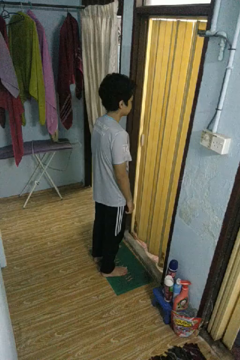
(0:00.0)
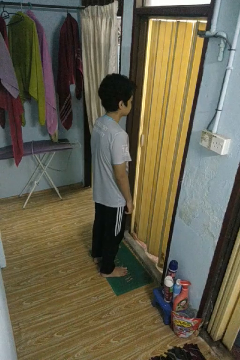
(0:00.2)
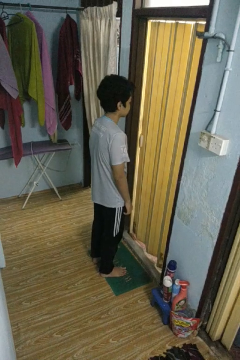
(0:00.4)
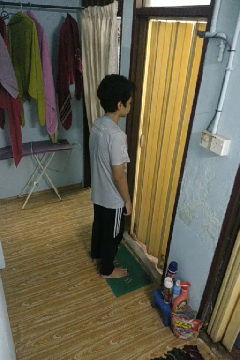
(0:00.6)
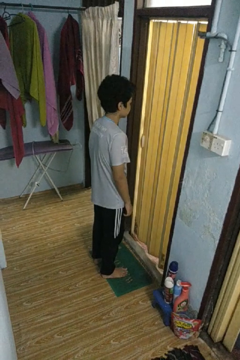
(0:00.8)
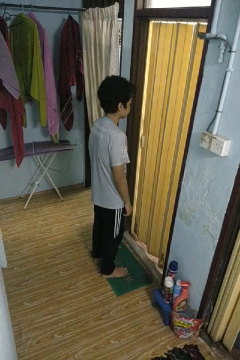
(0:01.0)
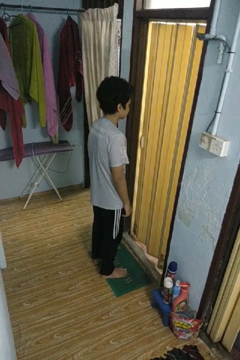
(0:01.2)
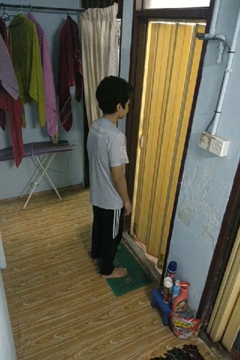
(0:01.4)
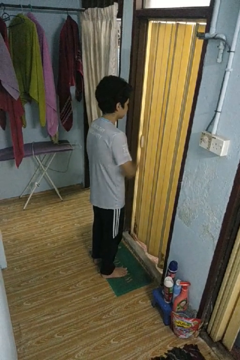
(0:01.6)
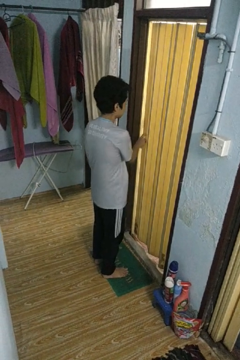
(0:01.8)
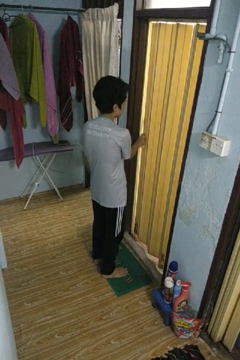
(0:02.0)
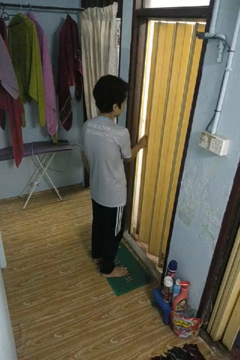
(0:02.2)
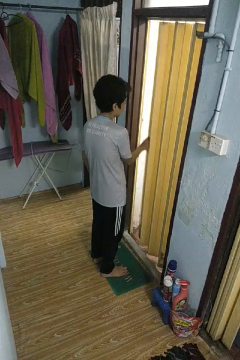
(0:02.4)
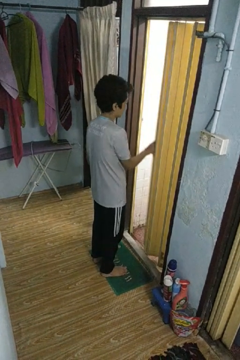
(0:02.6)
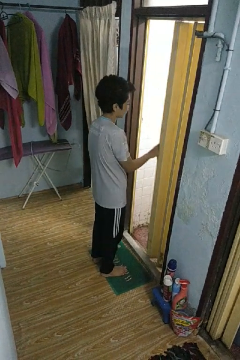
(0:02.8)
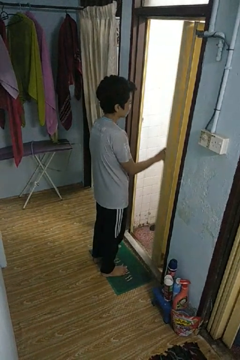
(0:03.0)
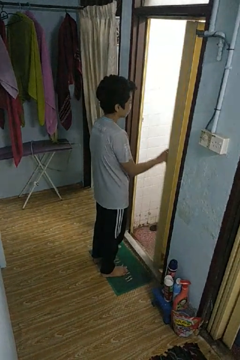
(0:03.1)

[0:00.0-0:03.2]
person opens sliding door

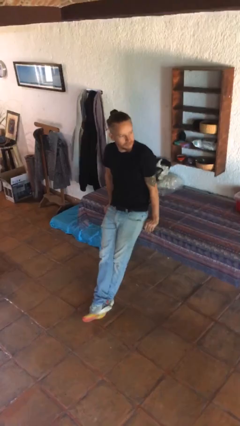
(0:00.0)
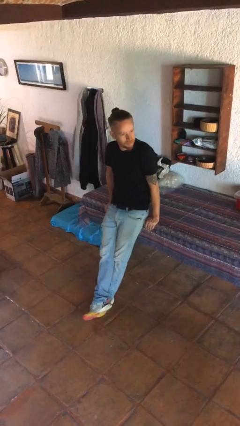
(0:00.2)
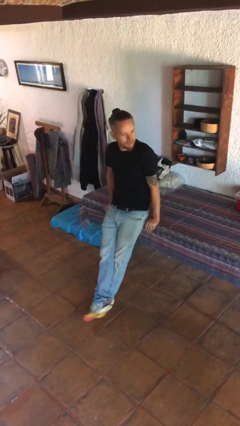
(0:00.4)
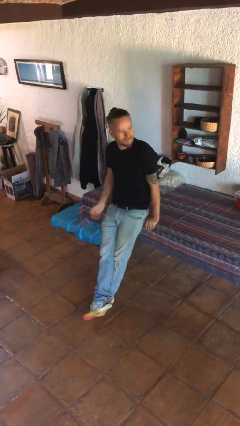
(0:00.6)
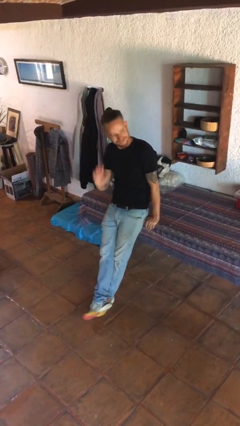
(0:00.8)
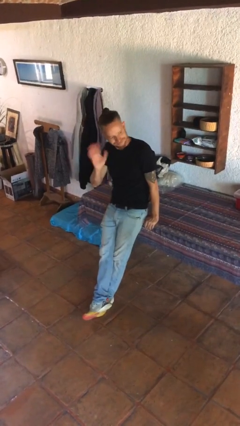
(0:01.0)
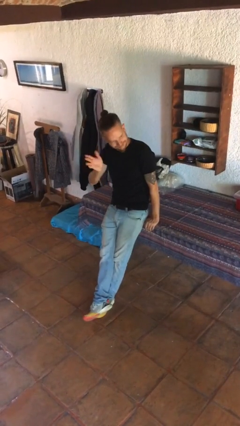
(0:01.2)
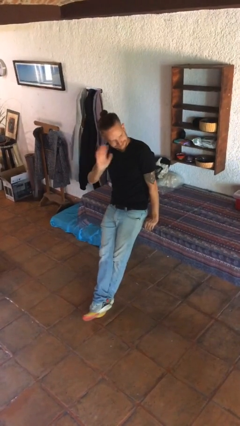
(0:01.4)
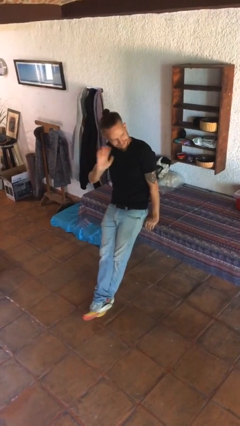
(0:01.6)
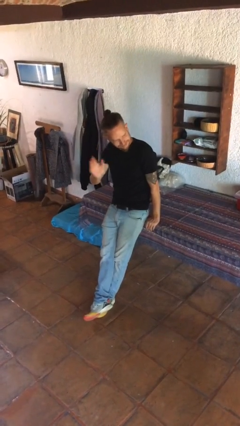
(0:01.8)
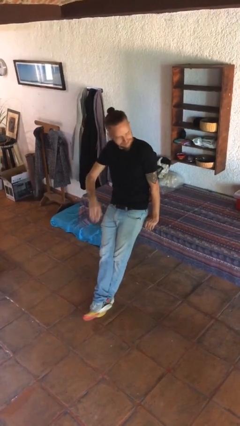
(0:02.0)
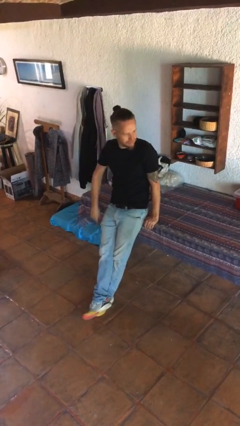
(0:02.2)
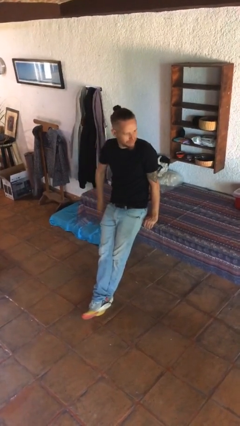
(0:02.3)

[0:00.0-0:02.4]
person waves at person

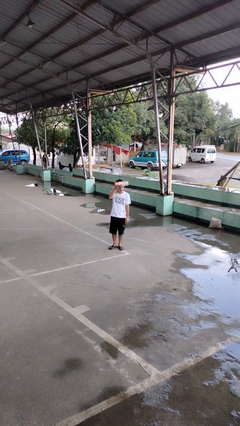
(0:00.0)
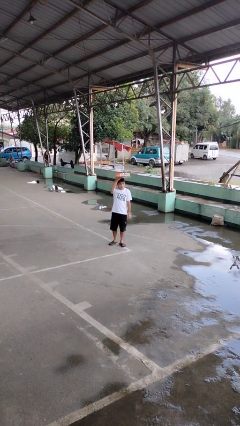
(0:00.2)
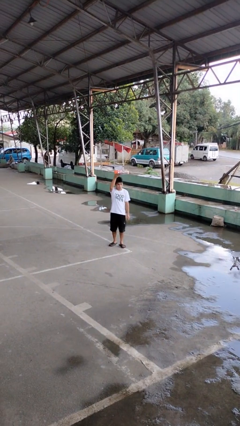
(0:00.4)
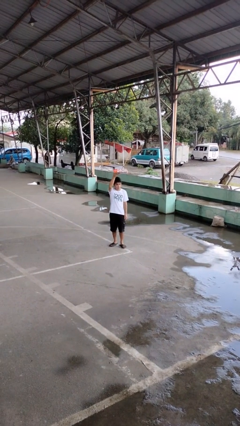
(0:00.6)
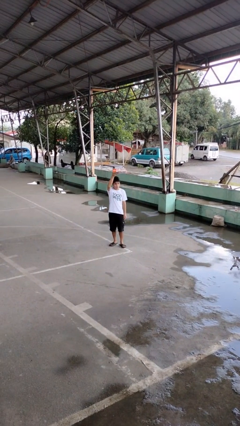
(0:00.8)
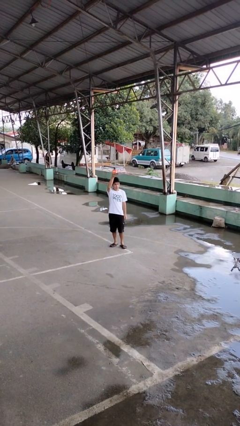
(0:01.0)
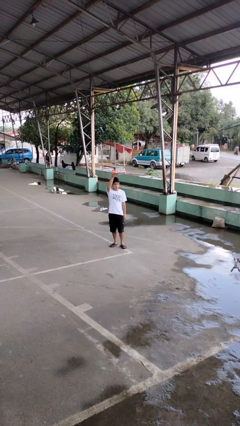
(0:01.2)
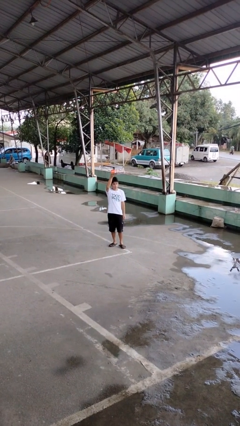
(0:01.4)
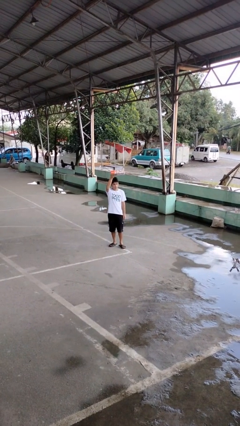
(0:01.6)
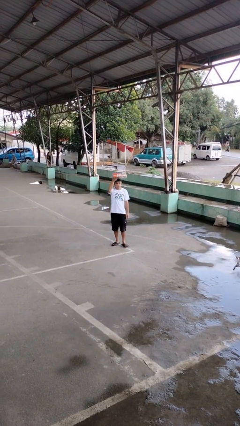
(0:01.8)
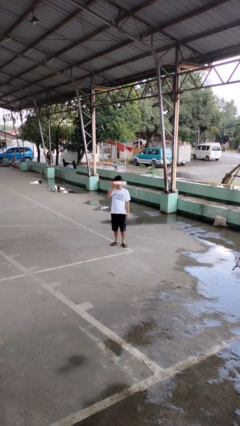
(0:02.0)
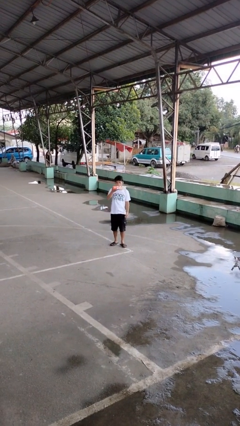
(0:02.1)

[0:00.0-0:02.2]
person holds object above head

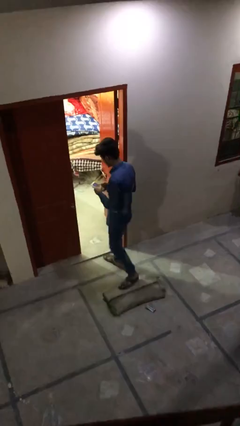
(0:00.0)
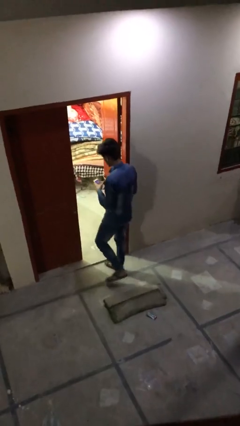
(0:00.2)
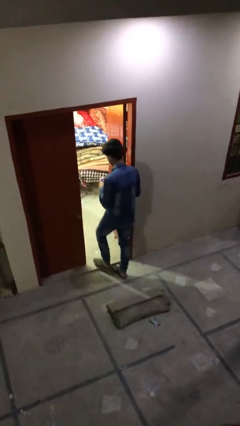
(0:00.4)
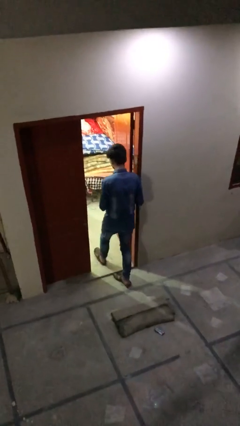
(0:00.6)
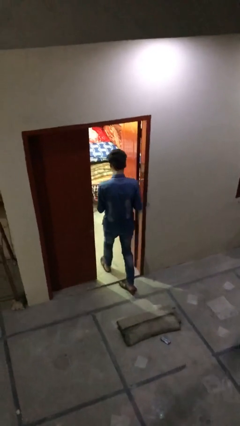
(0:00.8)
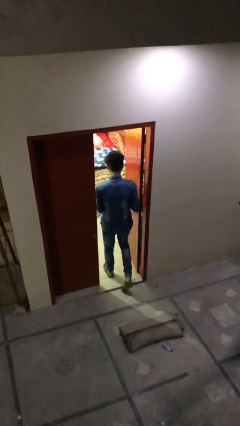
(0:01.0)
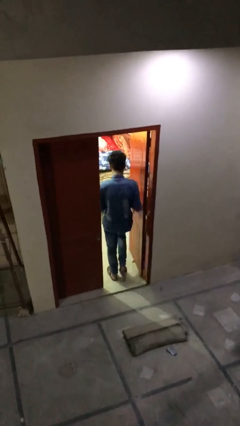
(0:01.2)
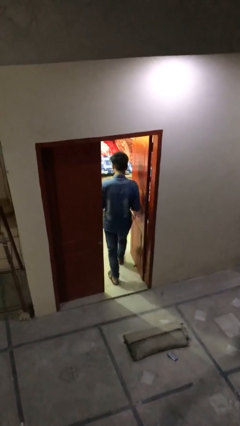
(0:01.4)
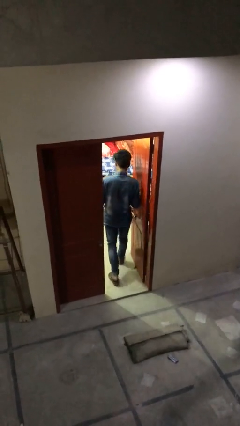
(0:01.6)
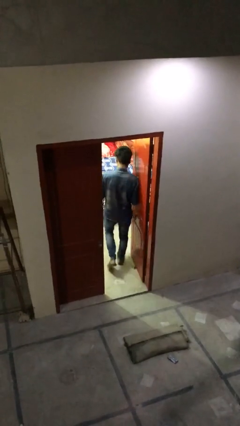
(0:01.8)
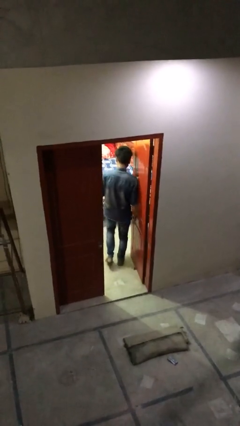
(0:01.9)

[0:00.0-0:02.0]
person exits scene through structure

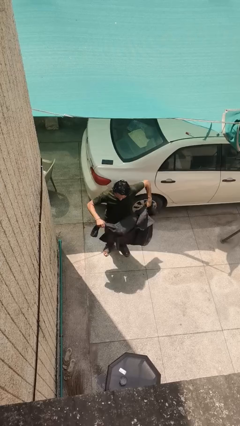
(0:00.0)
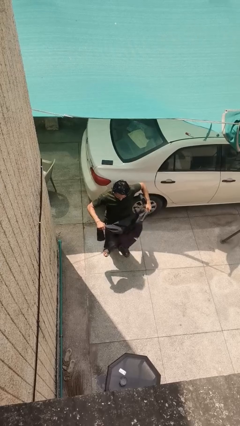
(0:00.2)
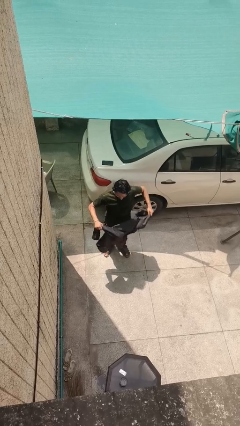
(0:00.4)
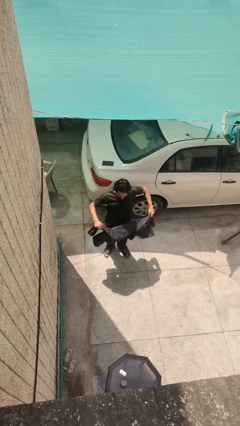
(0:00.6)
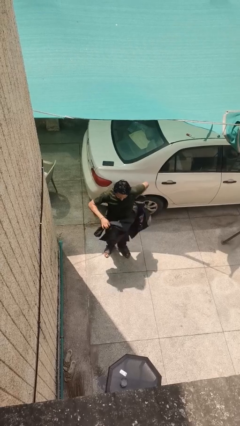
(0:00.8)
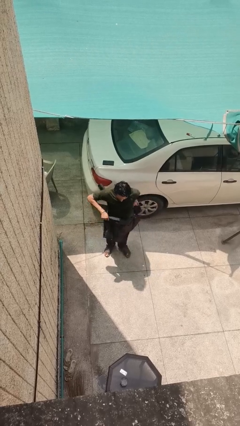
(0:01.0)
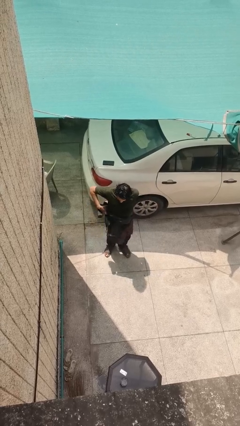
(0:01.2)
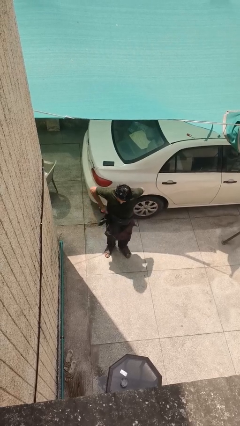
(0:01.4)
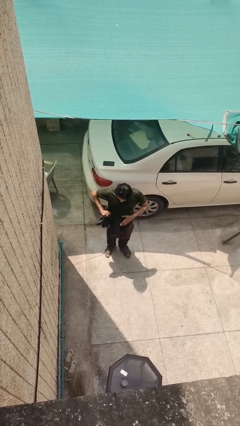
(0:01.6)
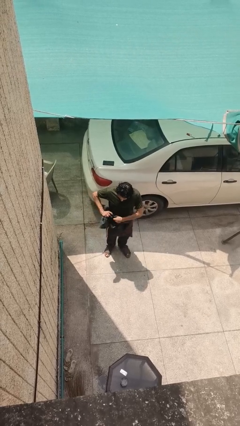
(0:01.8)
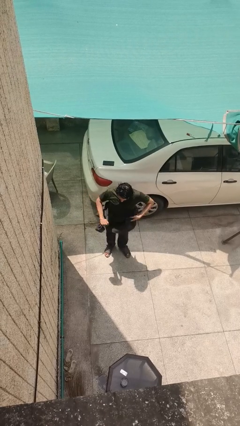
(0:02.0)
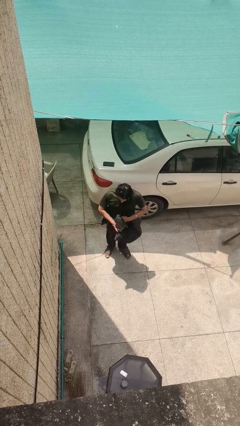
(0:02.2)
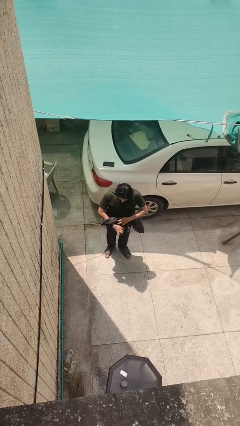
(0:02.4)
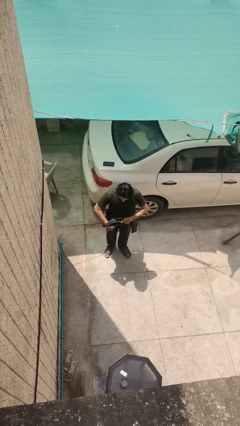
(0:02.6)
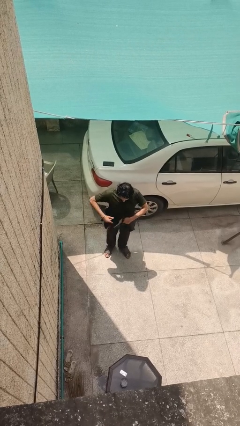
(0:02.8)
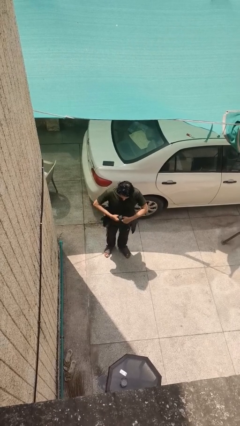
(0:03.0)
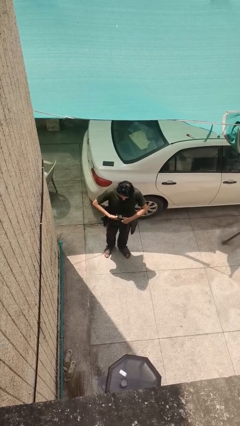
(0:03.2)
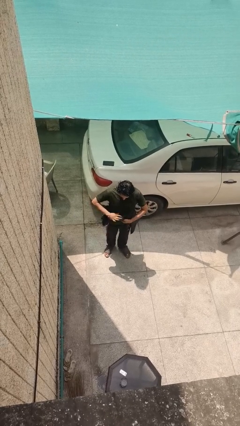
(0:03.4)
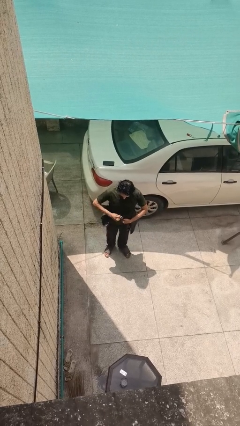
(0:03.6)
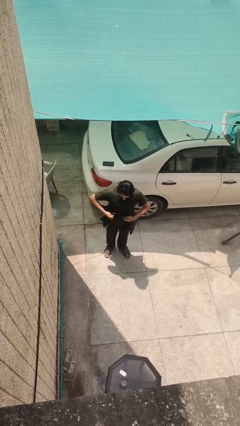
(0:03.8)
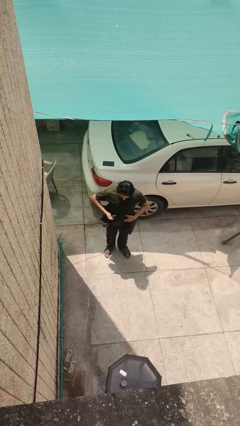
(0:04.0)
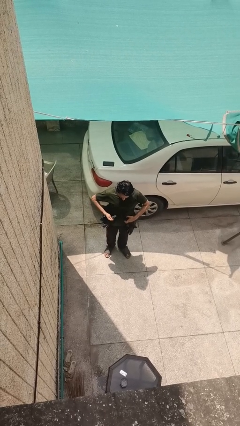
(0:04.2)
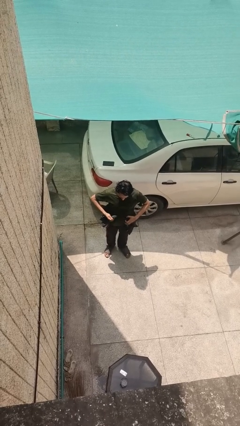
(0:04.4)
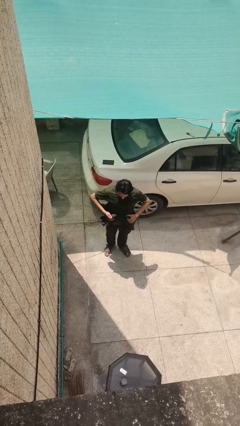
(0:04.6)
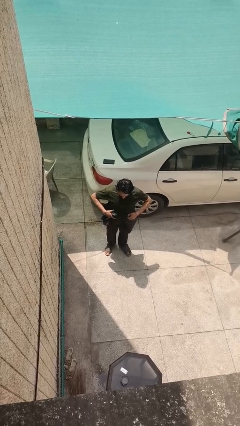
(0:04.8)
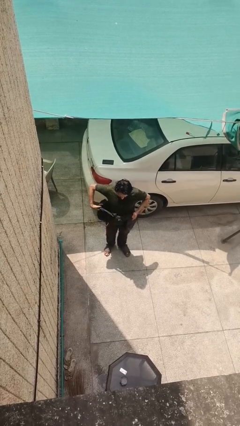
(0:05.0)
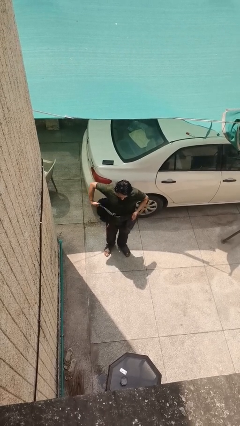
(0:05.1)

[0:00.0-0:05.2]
person ties jacket around waist

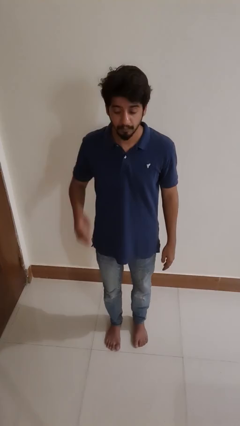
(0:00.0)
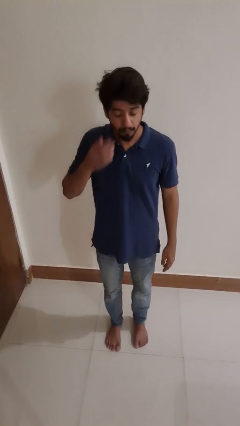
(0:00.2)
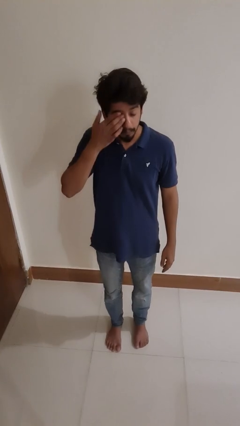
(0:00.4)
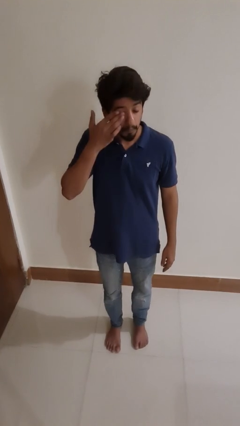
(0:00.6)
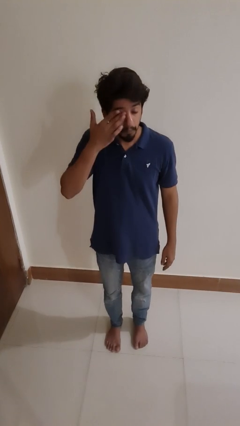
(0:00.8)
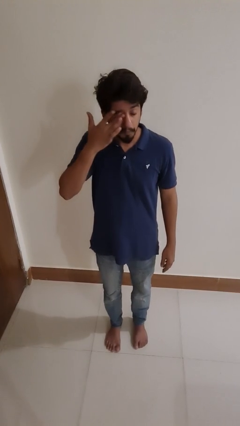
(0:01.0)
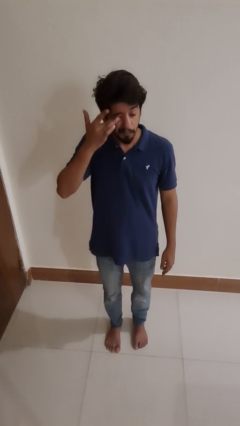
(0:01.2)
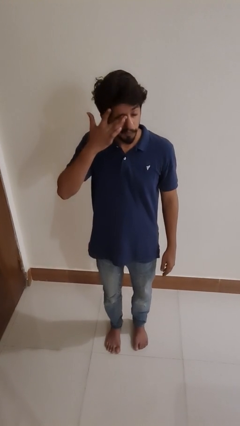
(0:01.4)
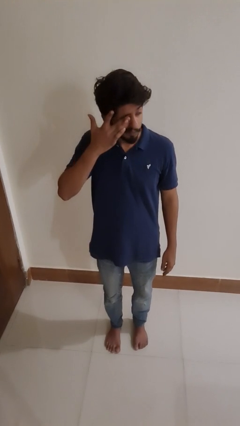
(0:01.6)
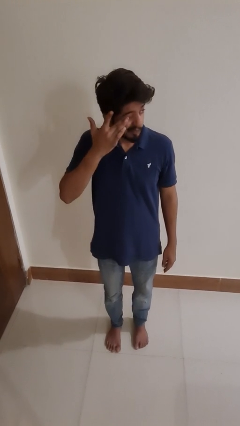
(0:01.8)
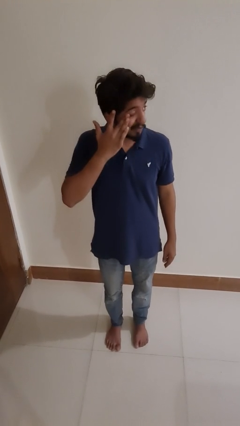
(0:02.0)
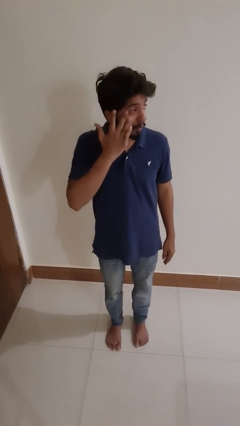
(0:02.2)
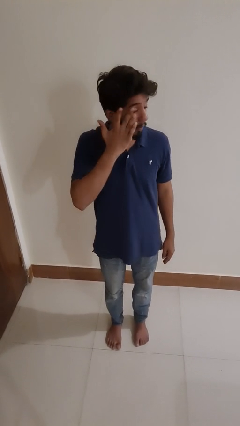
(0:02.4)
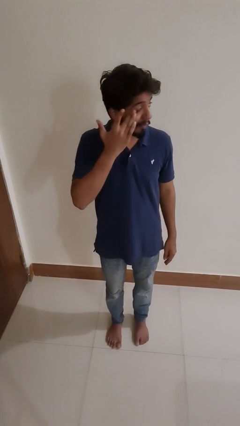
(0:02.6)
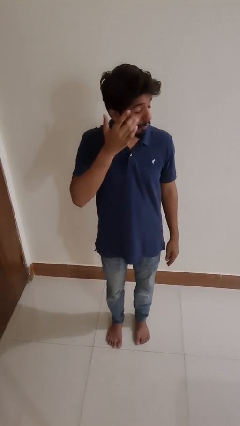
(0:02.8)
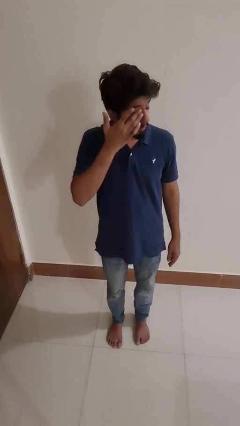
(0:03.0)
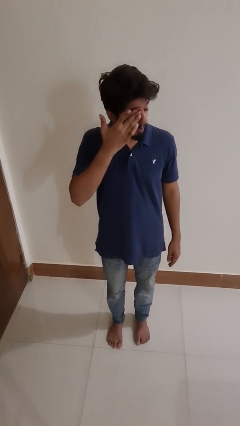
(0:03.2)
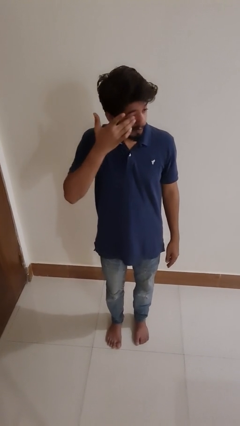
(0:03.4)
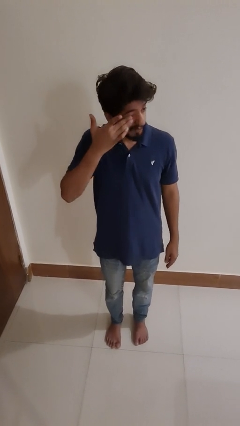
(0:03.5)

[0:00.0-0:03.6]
person rubs eyes
